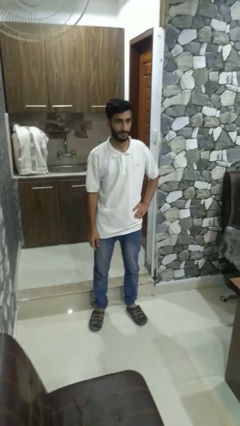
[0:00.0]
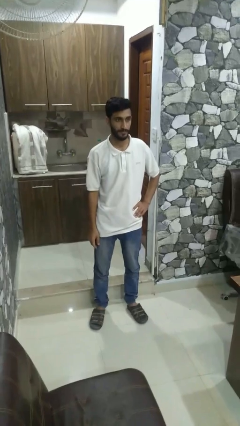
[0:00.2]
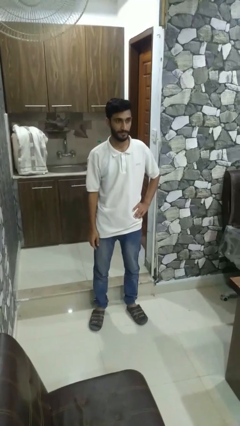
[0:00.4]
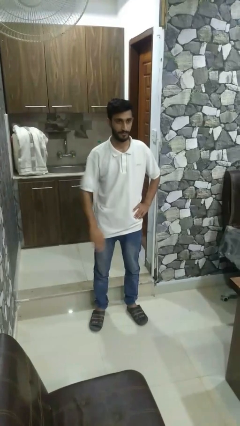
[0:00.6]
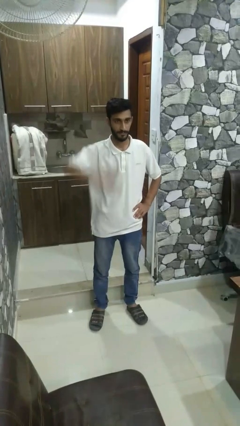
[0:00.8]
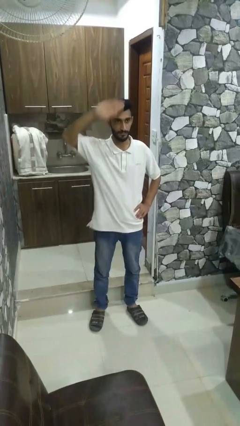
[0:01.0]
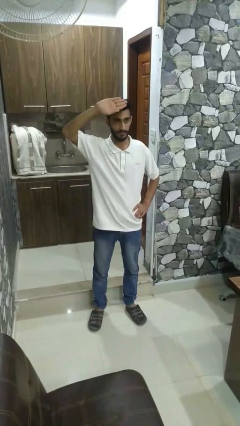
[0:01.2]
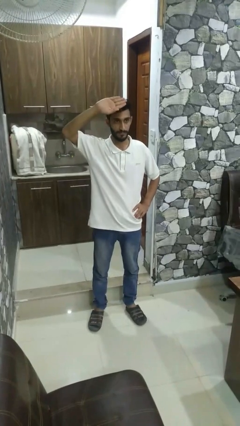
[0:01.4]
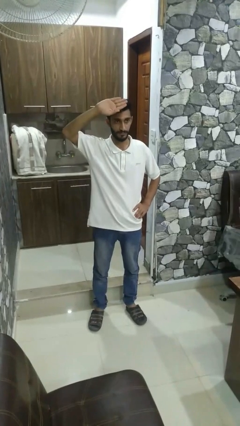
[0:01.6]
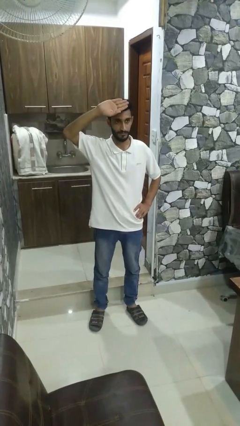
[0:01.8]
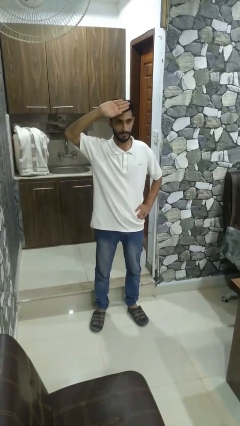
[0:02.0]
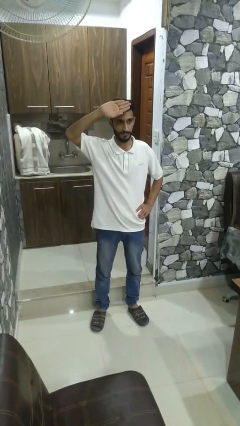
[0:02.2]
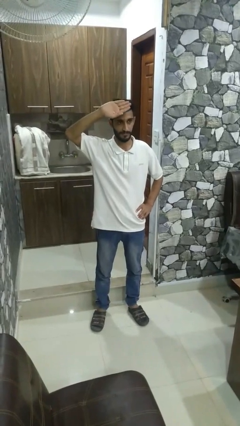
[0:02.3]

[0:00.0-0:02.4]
person gestures swipe up

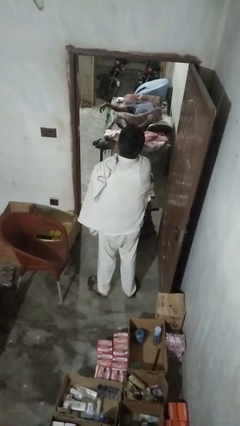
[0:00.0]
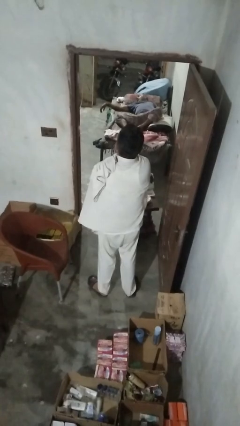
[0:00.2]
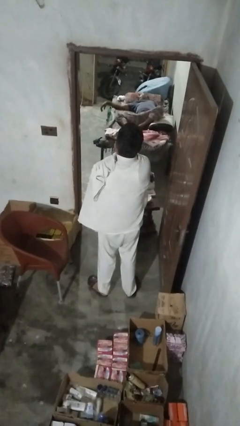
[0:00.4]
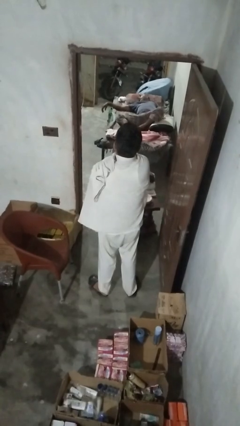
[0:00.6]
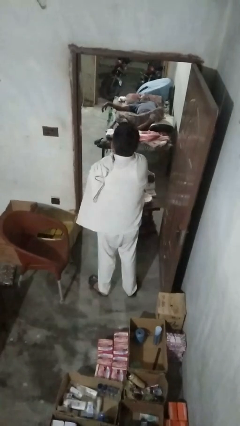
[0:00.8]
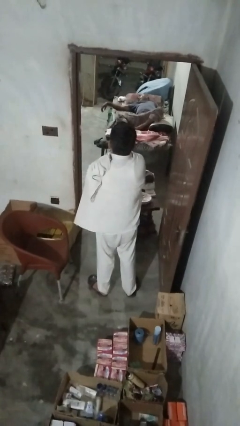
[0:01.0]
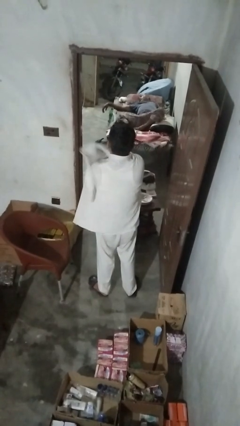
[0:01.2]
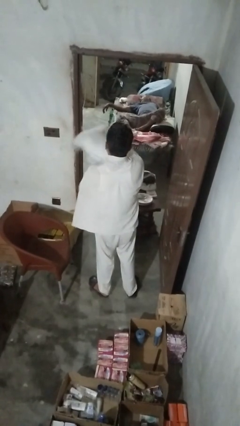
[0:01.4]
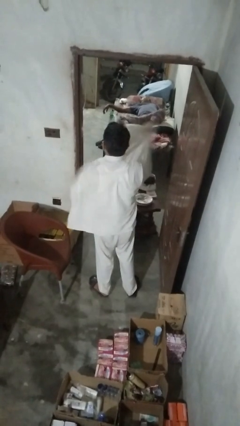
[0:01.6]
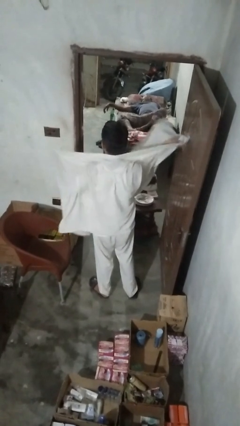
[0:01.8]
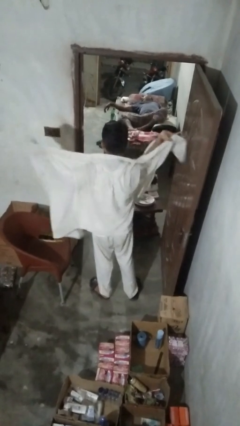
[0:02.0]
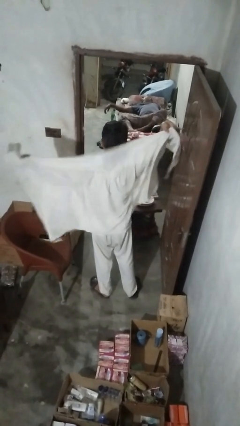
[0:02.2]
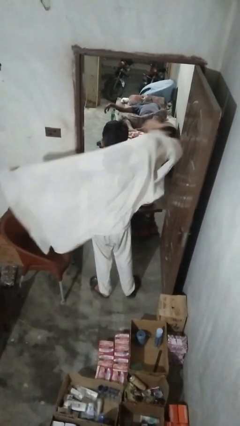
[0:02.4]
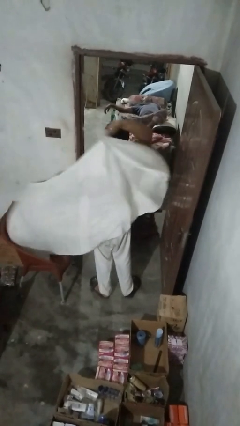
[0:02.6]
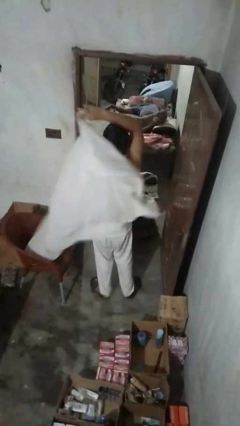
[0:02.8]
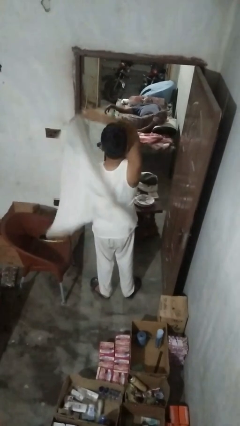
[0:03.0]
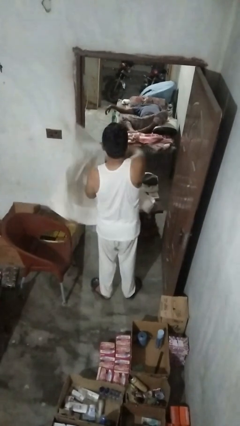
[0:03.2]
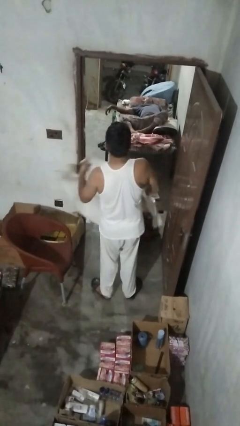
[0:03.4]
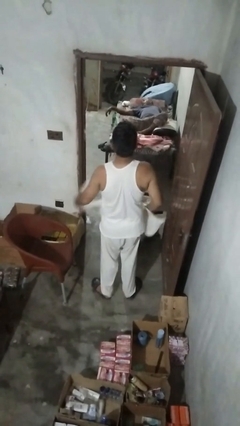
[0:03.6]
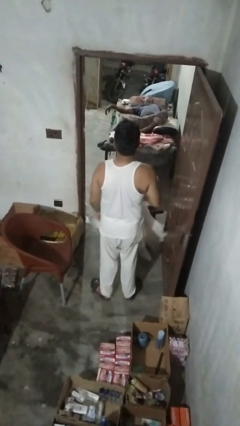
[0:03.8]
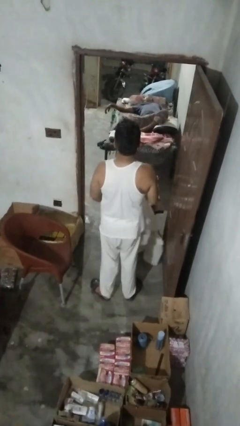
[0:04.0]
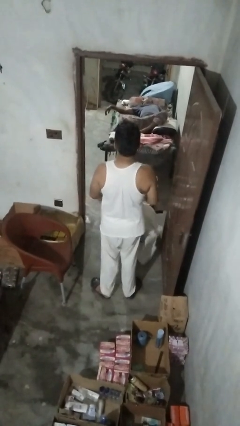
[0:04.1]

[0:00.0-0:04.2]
person unfolds blanket

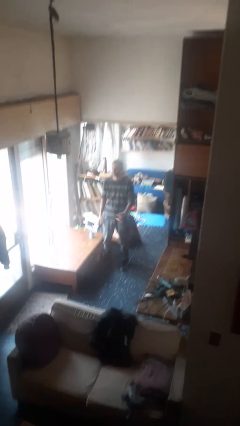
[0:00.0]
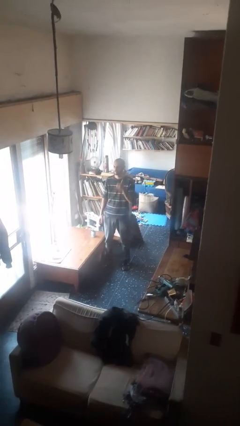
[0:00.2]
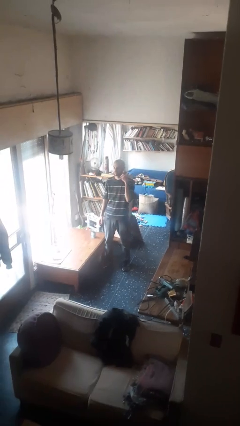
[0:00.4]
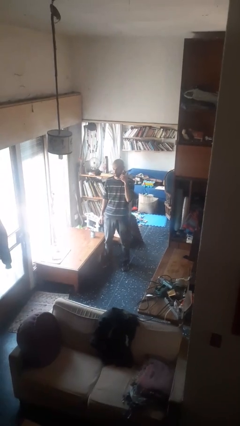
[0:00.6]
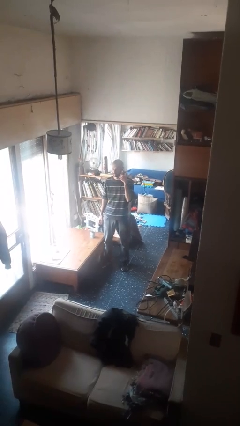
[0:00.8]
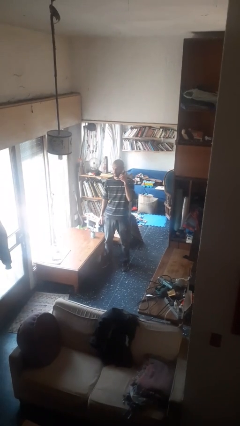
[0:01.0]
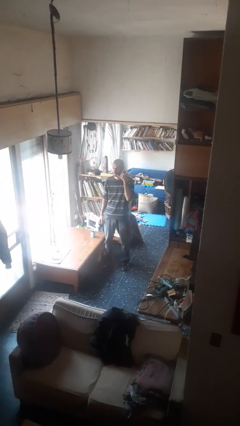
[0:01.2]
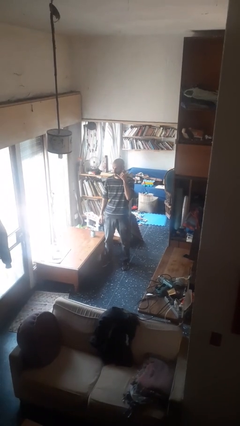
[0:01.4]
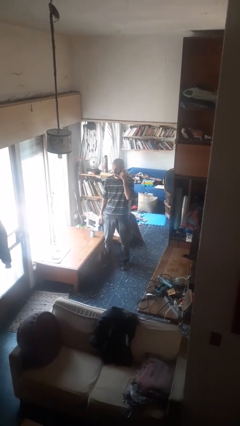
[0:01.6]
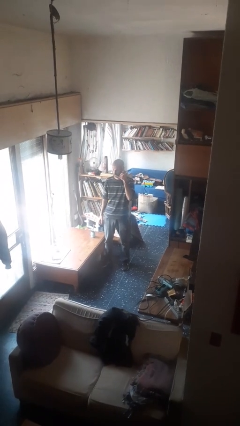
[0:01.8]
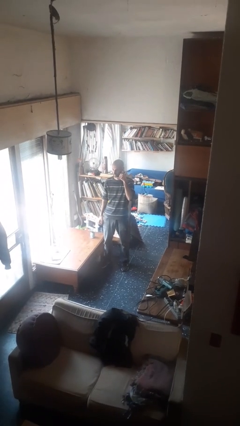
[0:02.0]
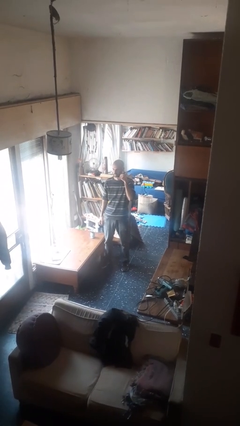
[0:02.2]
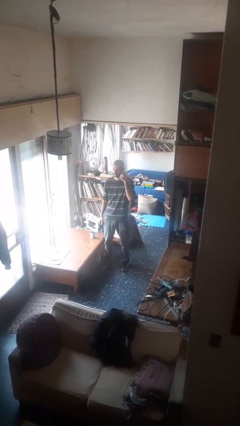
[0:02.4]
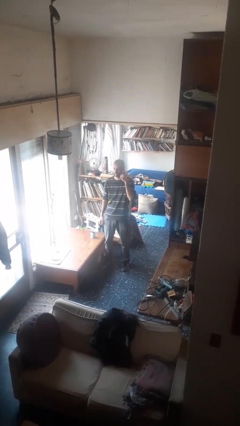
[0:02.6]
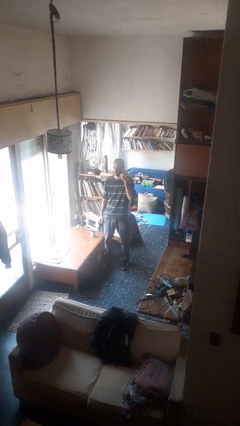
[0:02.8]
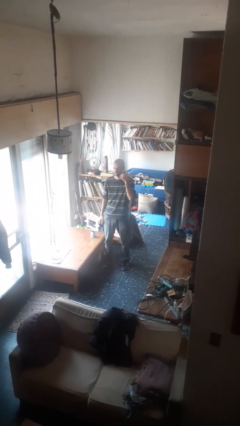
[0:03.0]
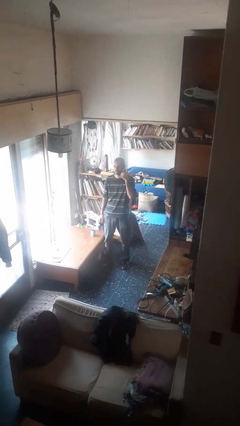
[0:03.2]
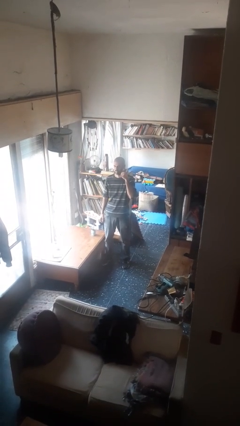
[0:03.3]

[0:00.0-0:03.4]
person gestures call me

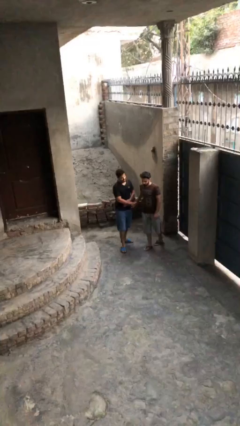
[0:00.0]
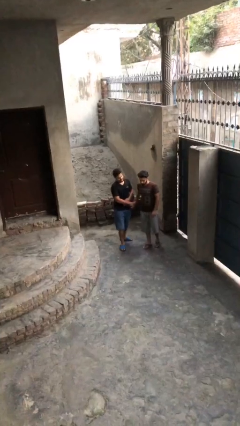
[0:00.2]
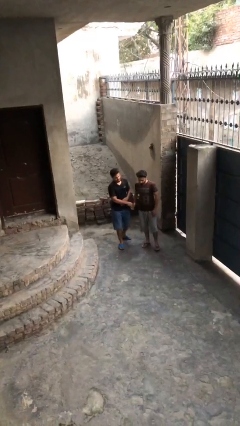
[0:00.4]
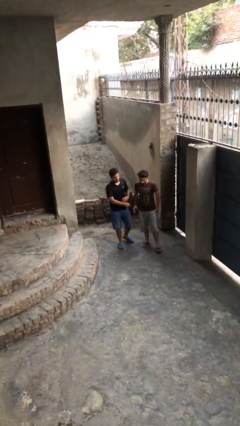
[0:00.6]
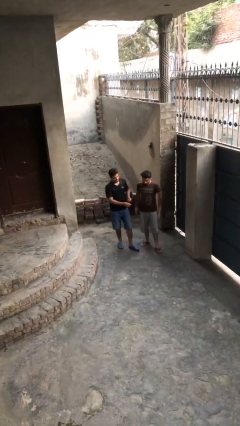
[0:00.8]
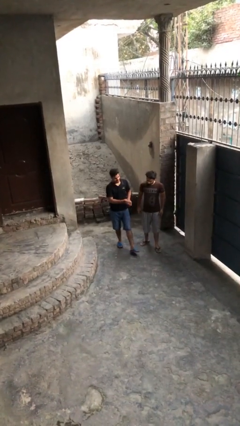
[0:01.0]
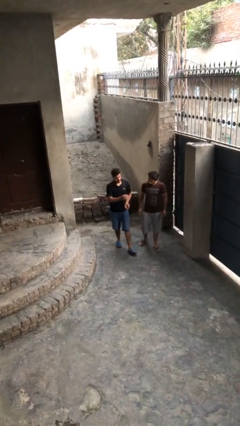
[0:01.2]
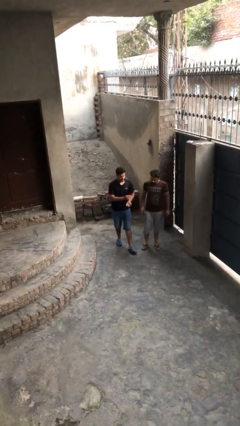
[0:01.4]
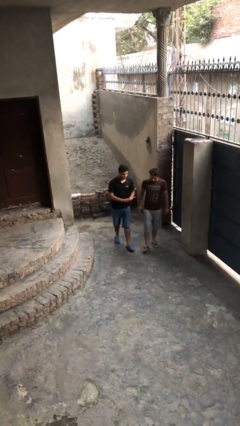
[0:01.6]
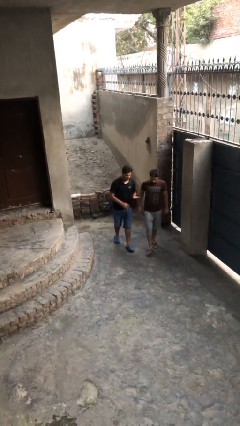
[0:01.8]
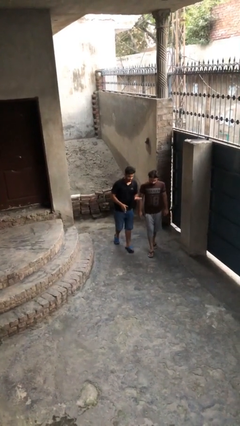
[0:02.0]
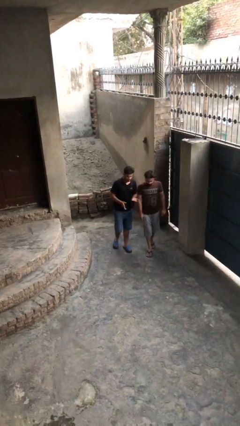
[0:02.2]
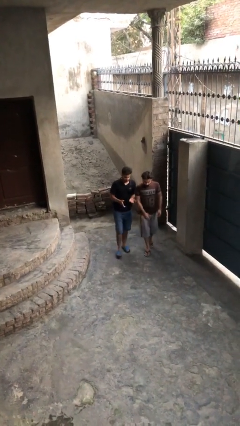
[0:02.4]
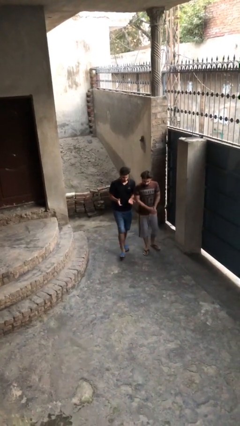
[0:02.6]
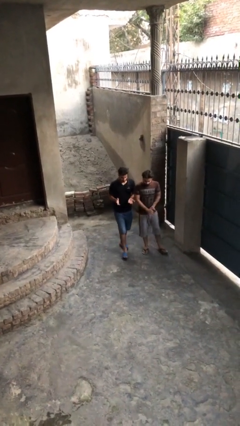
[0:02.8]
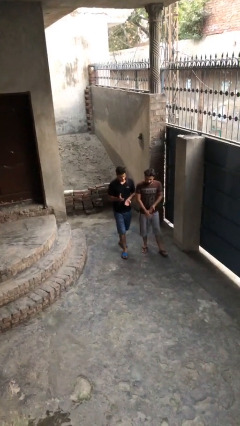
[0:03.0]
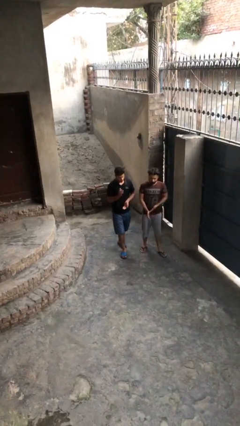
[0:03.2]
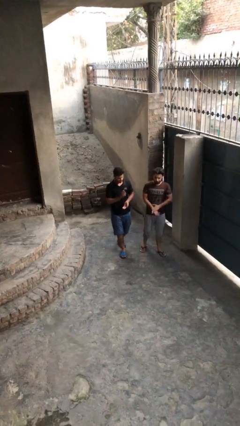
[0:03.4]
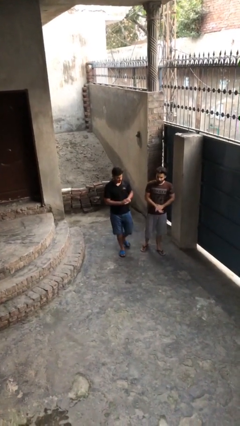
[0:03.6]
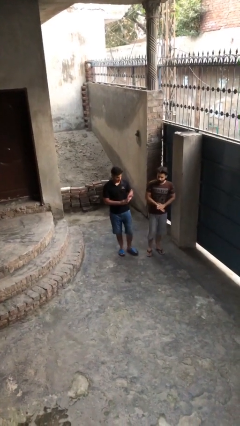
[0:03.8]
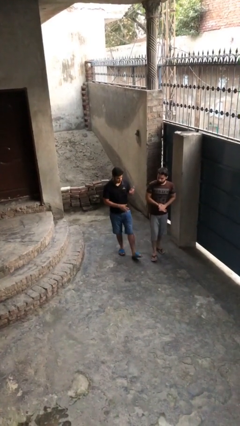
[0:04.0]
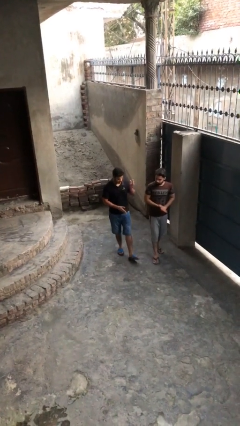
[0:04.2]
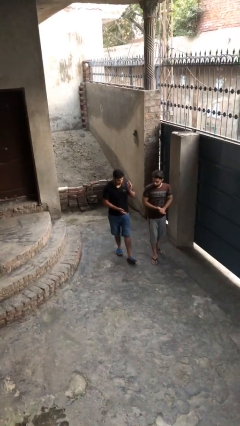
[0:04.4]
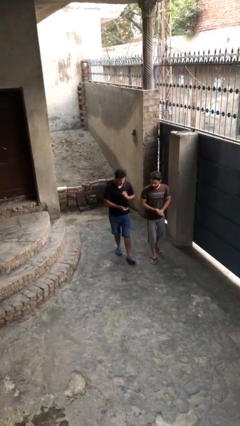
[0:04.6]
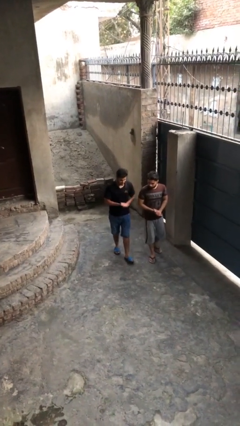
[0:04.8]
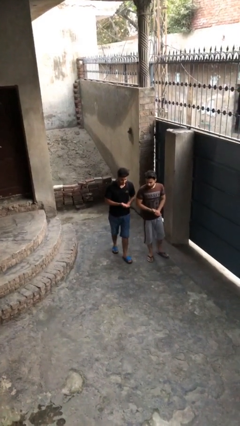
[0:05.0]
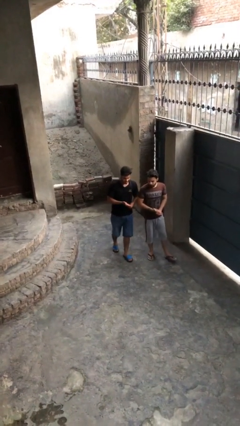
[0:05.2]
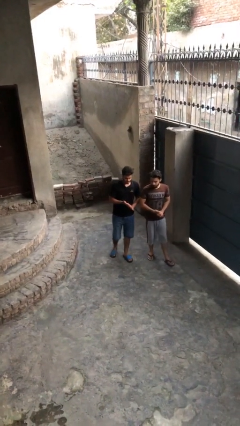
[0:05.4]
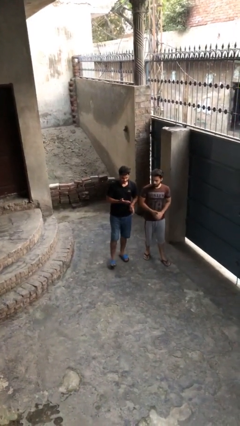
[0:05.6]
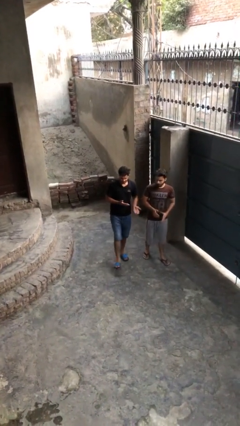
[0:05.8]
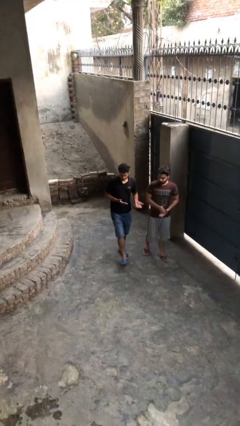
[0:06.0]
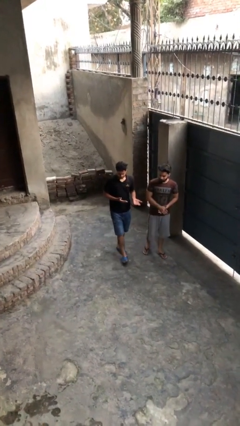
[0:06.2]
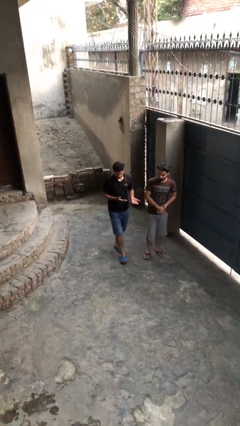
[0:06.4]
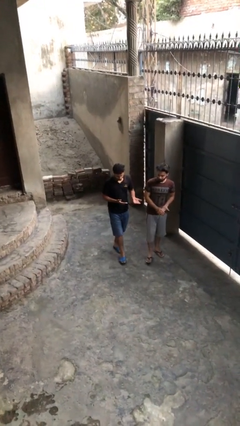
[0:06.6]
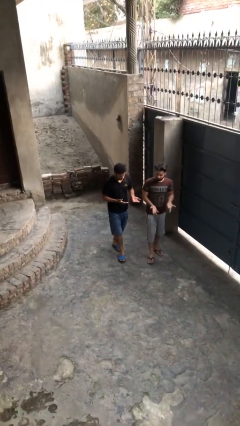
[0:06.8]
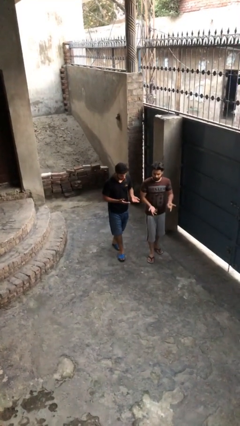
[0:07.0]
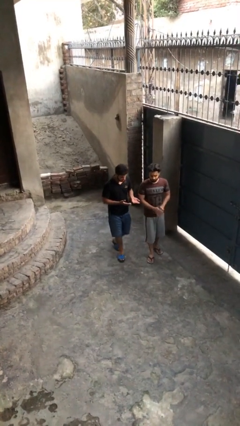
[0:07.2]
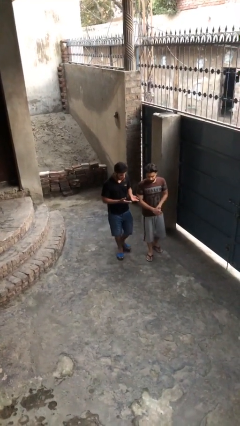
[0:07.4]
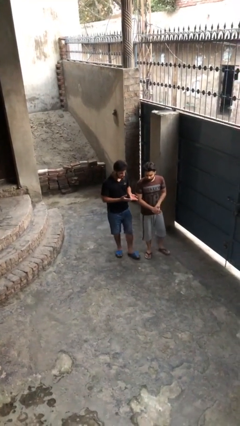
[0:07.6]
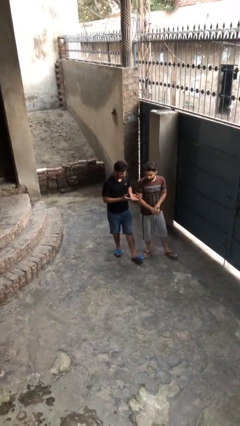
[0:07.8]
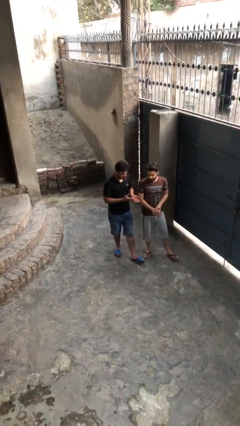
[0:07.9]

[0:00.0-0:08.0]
person talks to person
